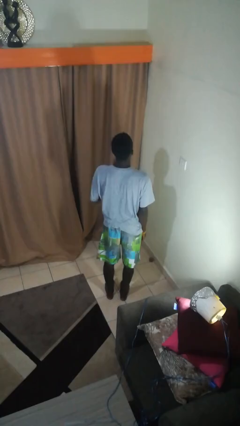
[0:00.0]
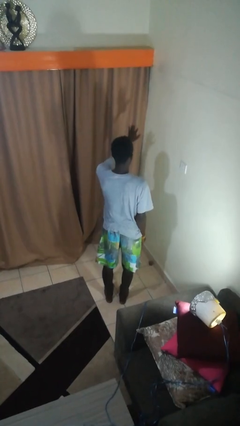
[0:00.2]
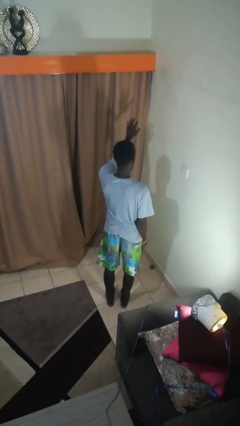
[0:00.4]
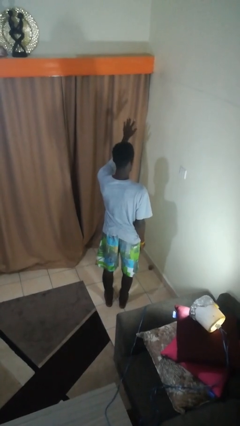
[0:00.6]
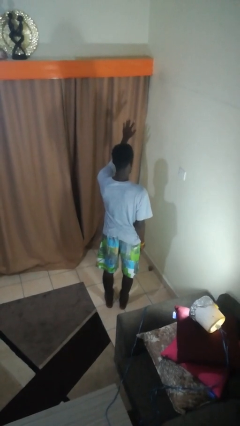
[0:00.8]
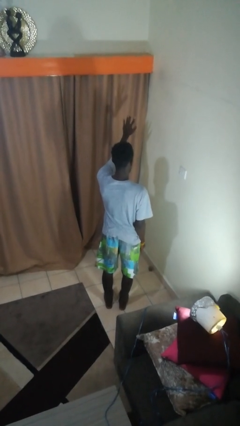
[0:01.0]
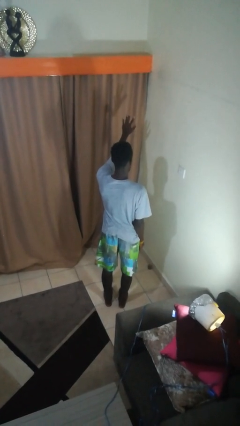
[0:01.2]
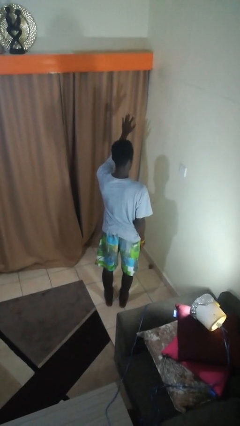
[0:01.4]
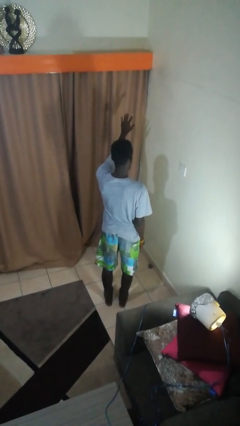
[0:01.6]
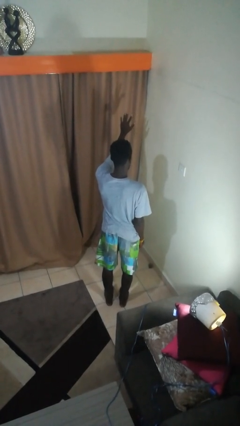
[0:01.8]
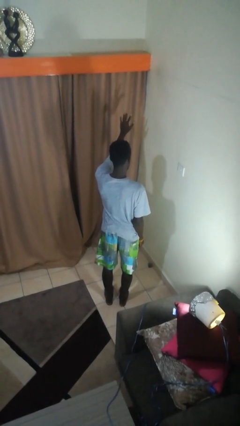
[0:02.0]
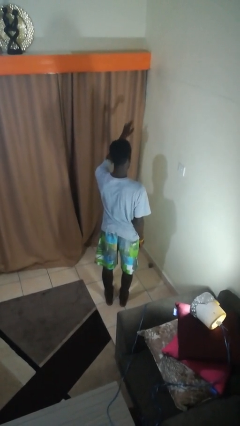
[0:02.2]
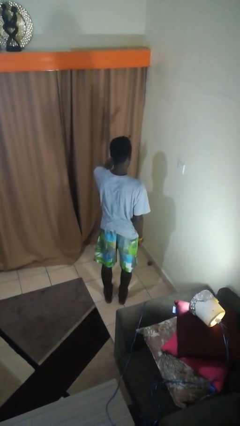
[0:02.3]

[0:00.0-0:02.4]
person gestures number five

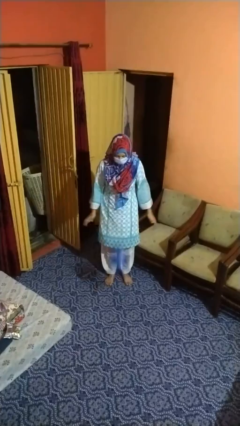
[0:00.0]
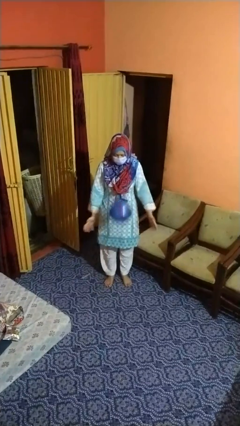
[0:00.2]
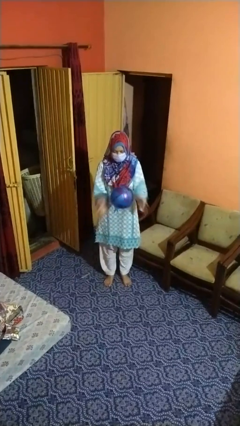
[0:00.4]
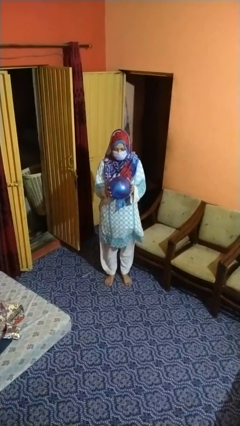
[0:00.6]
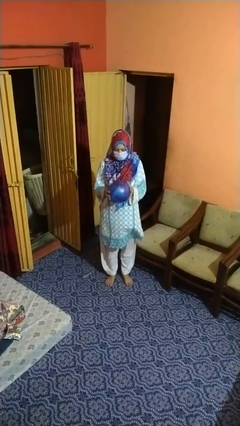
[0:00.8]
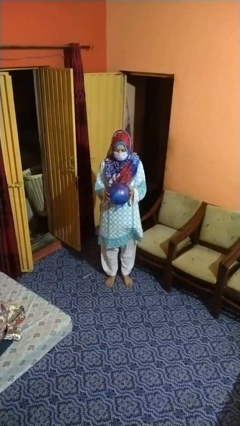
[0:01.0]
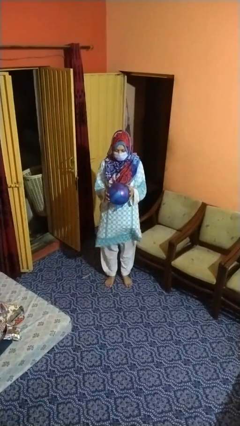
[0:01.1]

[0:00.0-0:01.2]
person bounces ball on floor

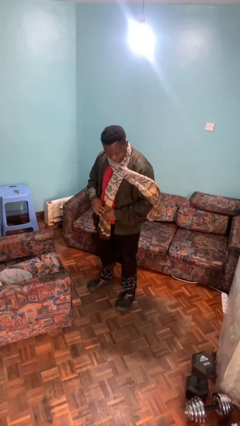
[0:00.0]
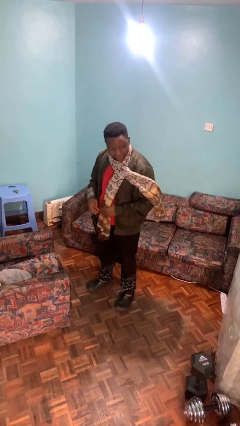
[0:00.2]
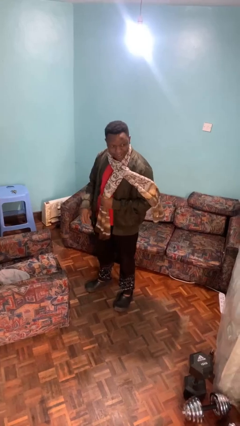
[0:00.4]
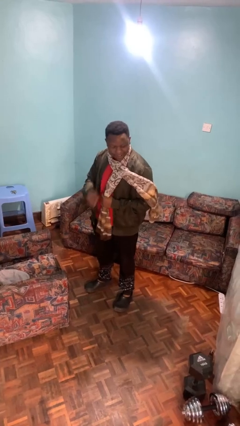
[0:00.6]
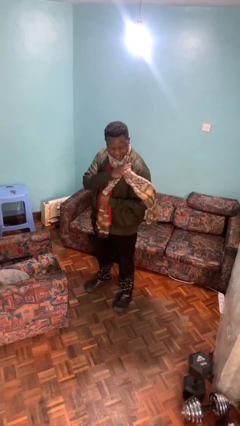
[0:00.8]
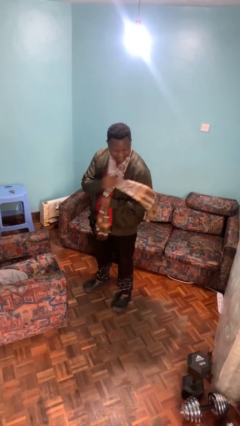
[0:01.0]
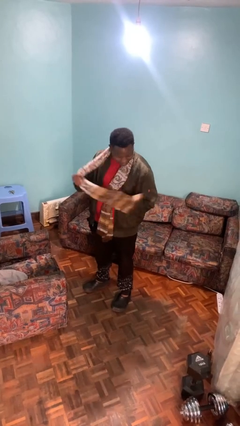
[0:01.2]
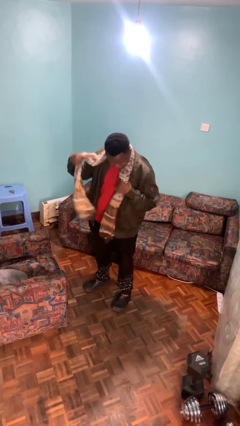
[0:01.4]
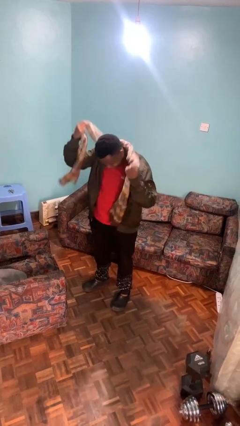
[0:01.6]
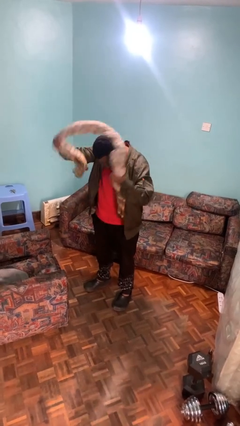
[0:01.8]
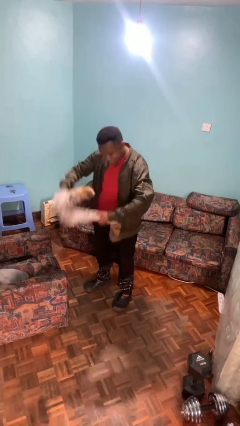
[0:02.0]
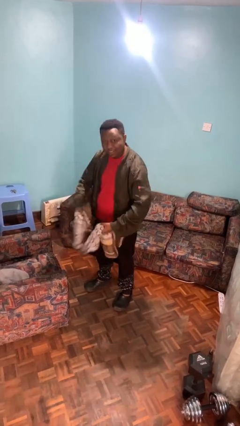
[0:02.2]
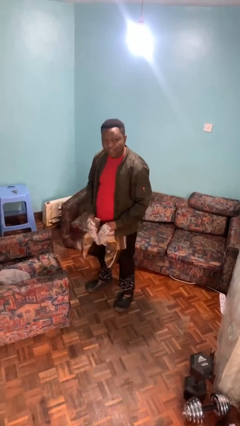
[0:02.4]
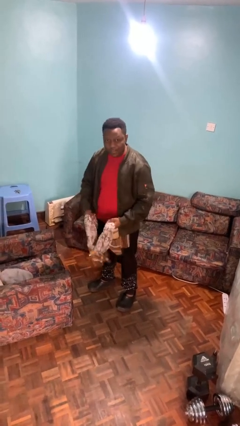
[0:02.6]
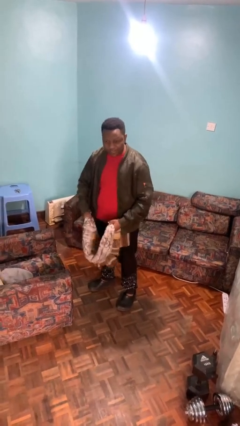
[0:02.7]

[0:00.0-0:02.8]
person takes off scarf

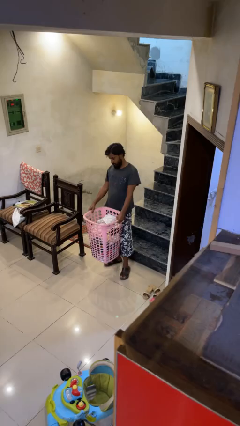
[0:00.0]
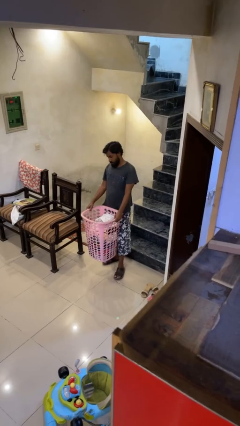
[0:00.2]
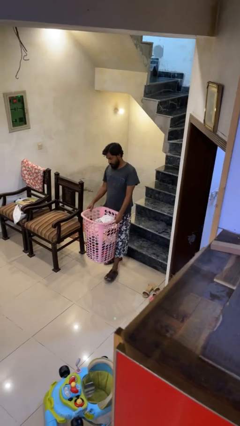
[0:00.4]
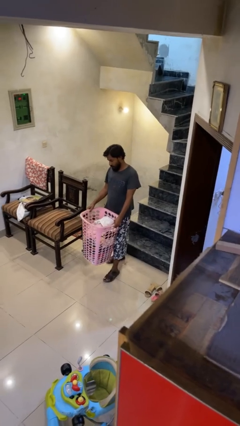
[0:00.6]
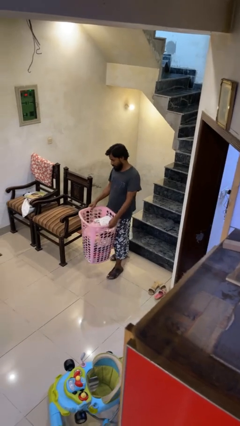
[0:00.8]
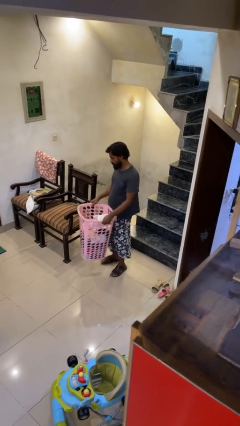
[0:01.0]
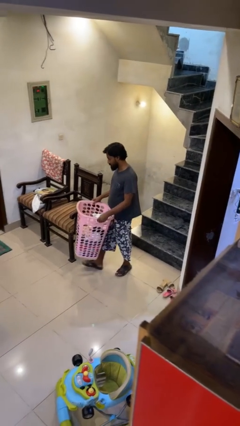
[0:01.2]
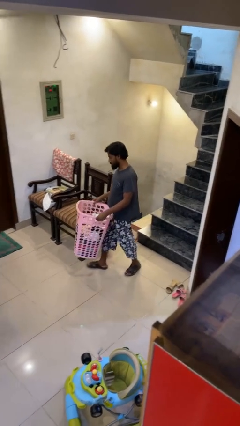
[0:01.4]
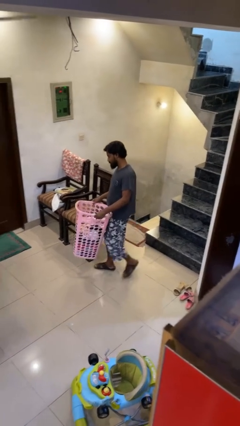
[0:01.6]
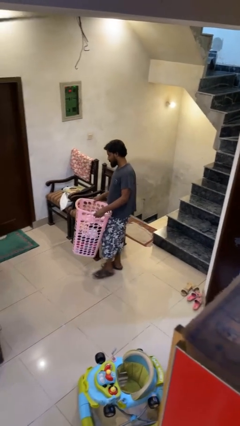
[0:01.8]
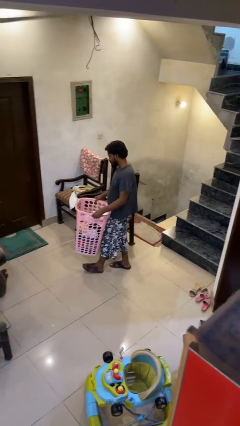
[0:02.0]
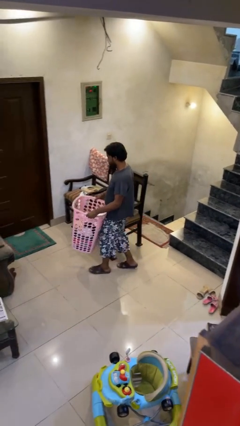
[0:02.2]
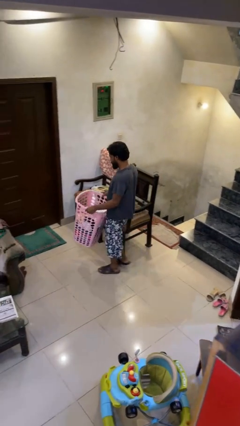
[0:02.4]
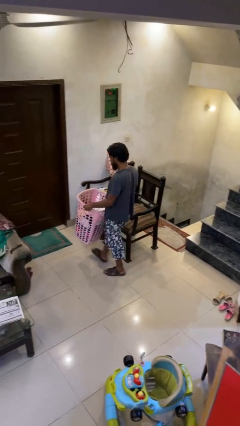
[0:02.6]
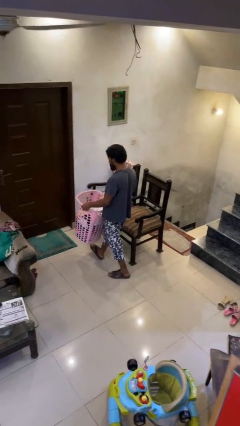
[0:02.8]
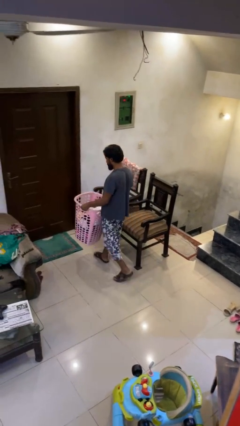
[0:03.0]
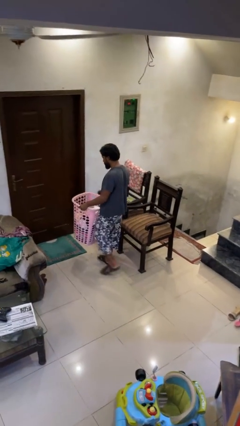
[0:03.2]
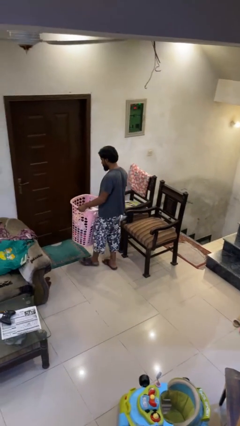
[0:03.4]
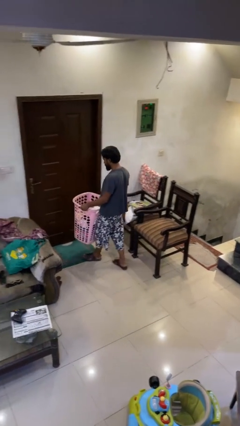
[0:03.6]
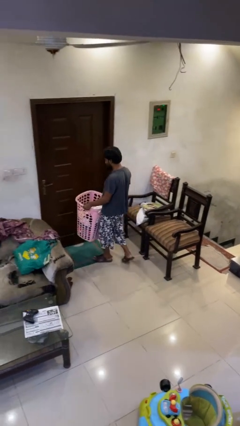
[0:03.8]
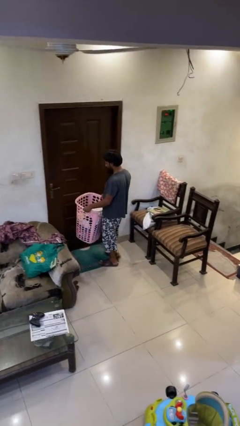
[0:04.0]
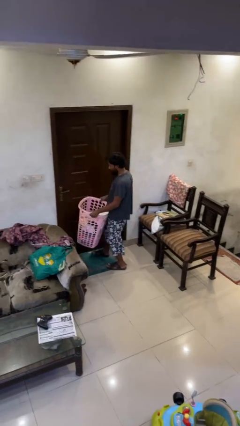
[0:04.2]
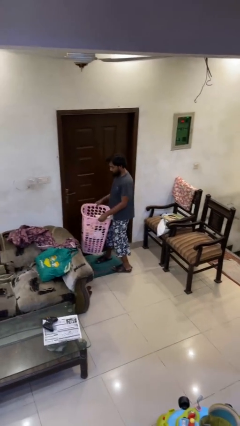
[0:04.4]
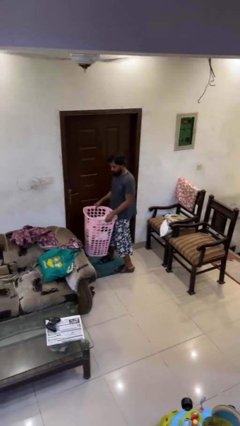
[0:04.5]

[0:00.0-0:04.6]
person carries laundry basket

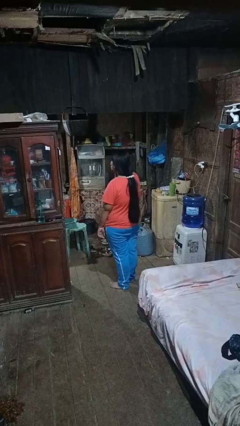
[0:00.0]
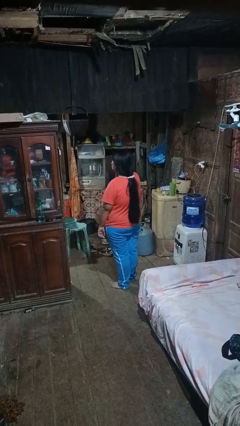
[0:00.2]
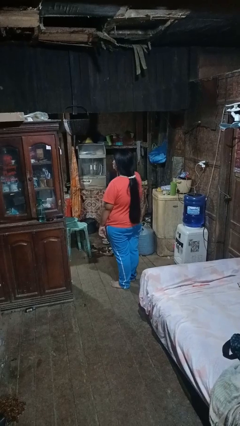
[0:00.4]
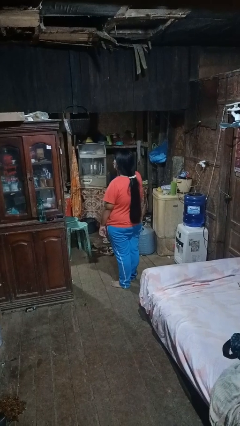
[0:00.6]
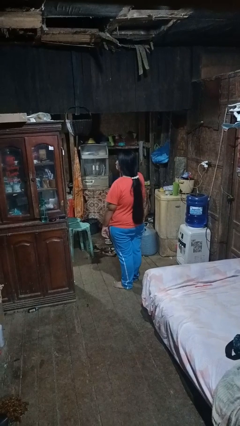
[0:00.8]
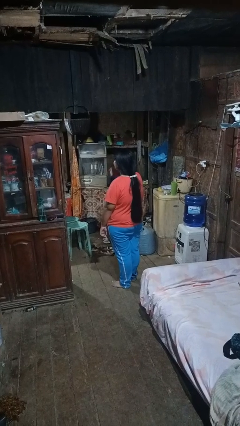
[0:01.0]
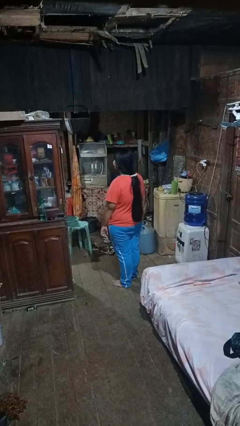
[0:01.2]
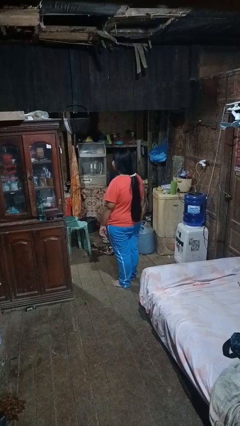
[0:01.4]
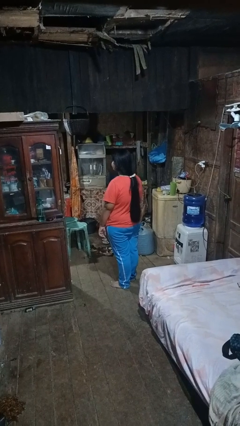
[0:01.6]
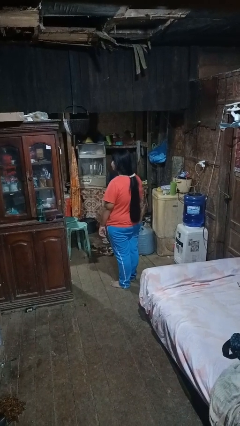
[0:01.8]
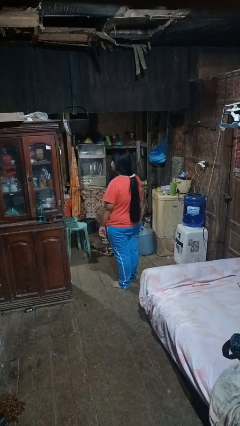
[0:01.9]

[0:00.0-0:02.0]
person yawns

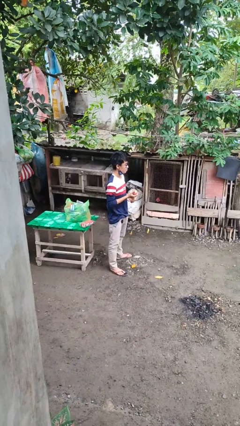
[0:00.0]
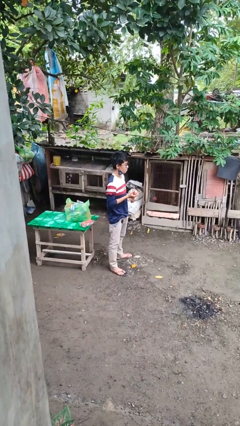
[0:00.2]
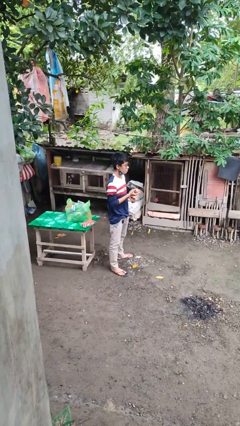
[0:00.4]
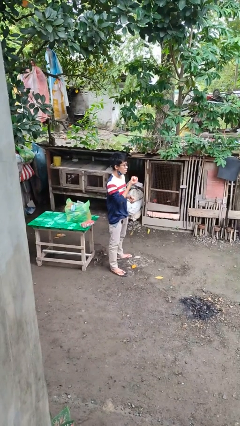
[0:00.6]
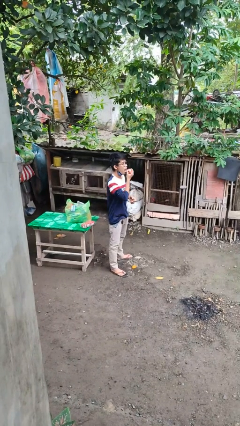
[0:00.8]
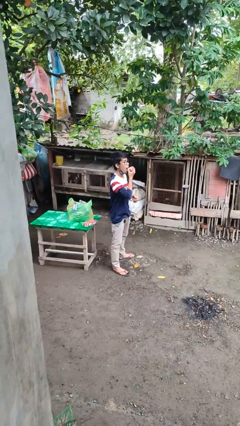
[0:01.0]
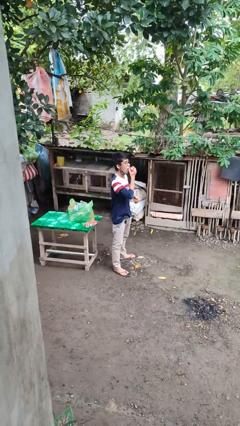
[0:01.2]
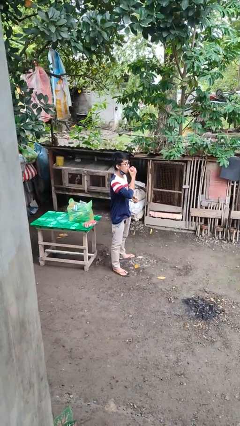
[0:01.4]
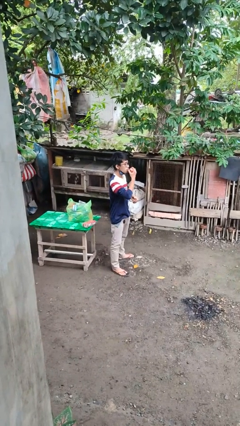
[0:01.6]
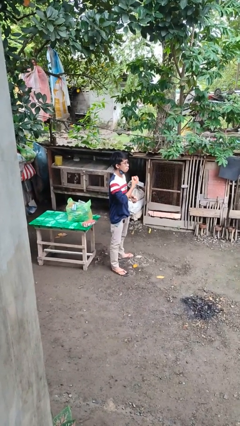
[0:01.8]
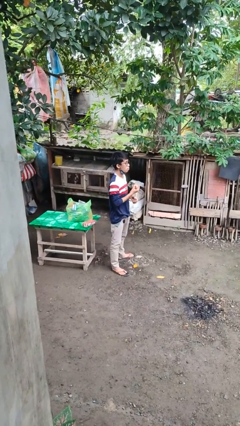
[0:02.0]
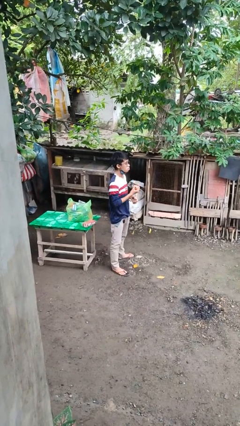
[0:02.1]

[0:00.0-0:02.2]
person eats apple

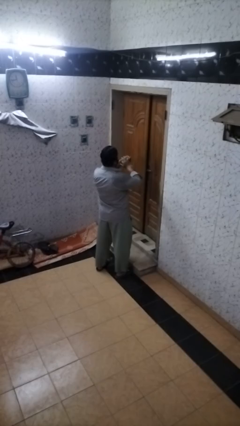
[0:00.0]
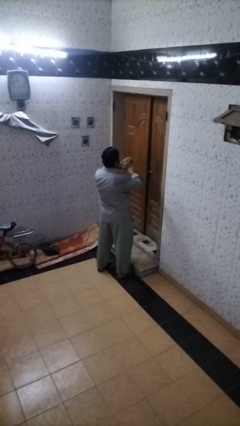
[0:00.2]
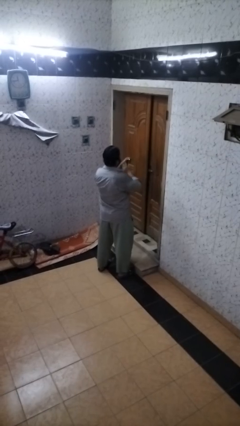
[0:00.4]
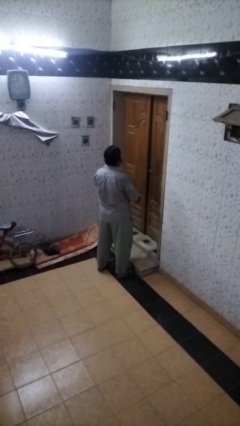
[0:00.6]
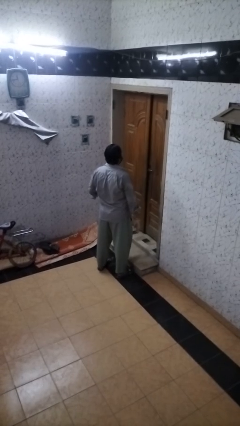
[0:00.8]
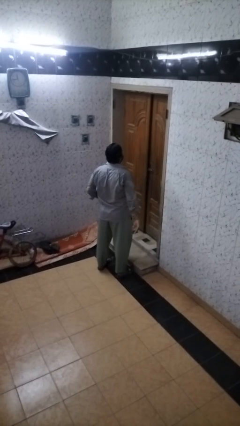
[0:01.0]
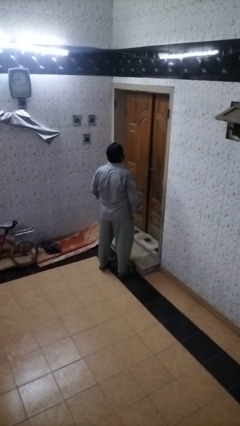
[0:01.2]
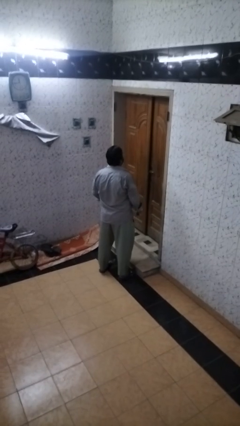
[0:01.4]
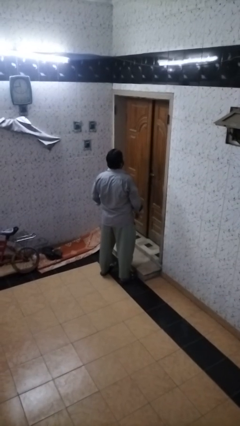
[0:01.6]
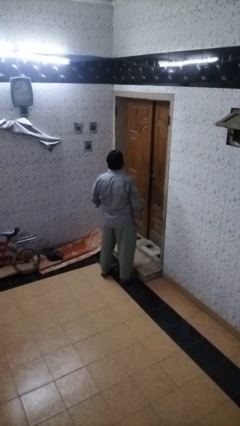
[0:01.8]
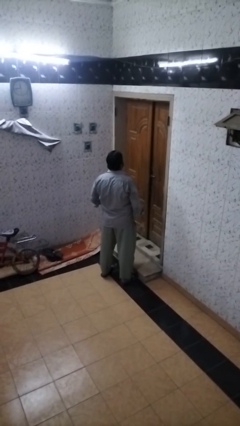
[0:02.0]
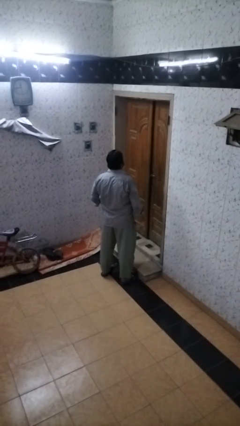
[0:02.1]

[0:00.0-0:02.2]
person takes off ring
